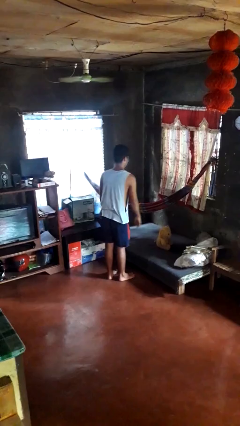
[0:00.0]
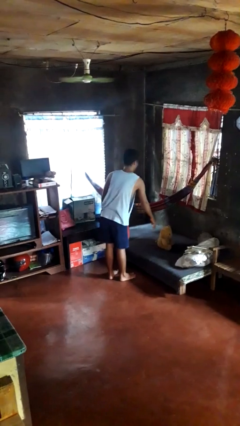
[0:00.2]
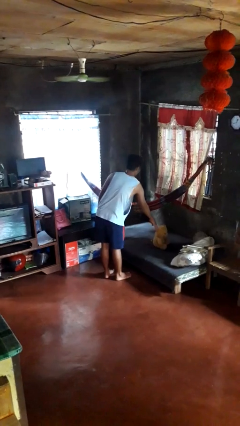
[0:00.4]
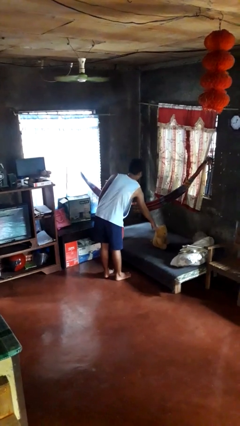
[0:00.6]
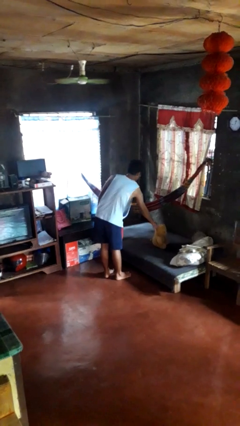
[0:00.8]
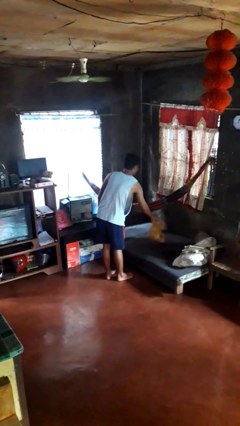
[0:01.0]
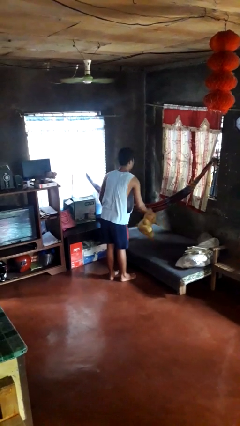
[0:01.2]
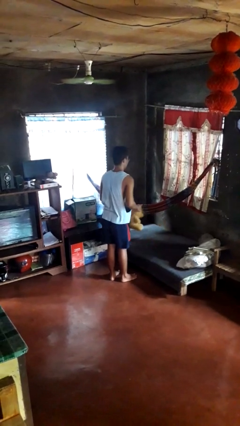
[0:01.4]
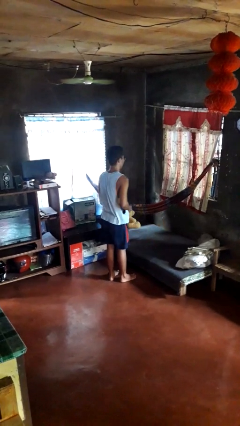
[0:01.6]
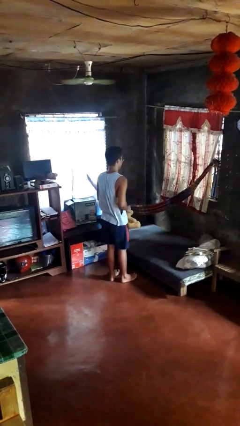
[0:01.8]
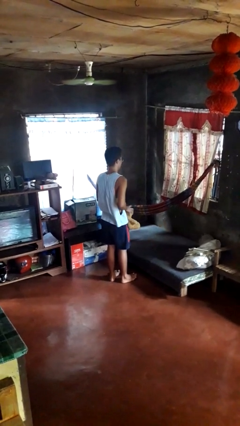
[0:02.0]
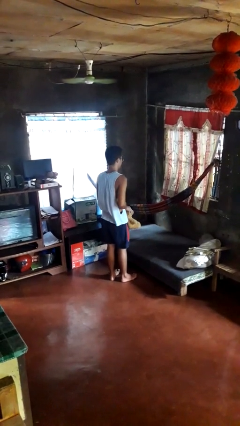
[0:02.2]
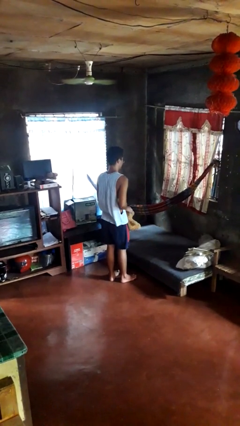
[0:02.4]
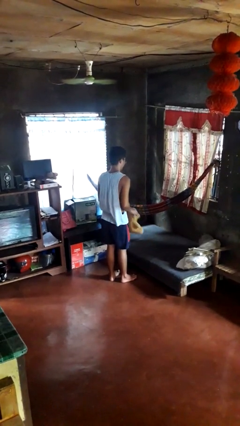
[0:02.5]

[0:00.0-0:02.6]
person picks up object from bed

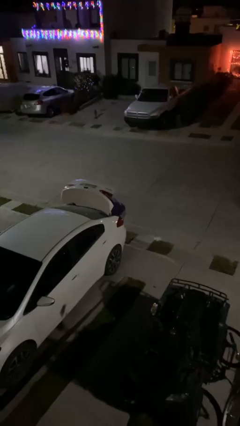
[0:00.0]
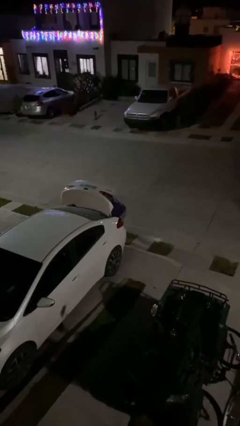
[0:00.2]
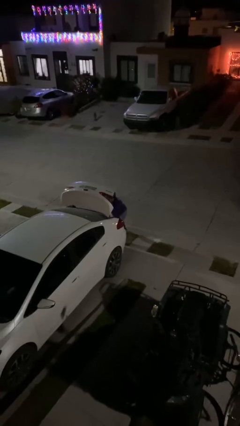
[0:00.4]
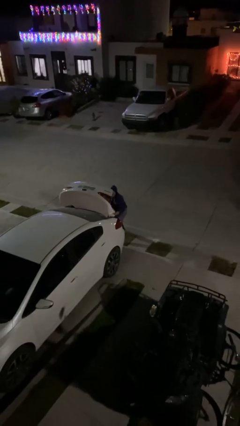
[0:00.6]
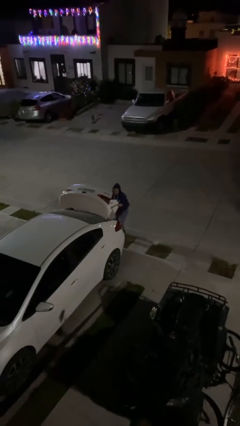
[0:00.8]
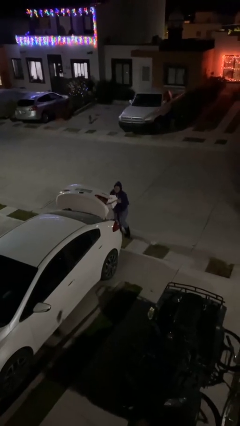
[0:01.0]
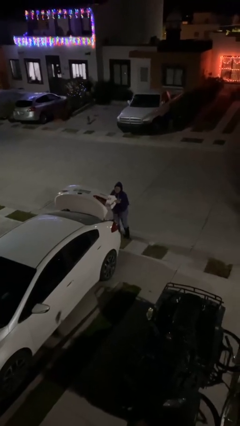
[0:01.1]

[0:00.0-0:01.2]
person unloads car

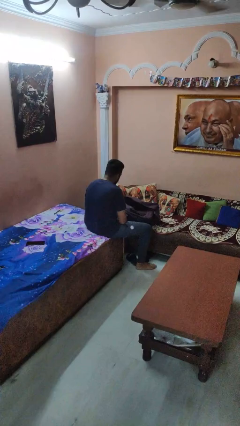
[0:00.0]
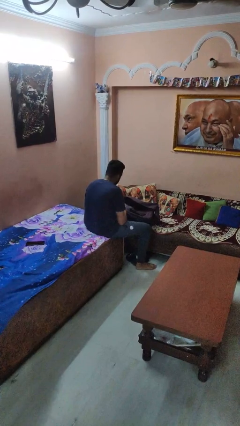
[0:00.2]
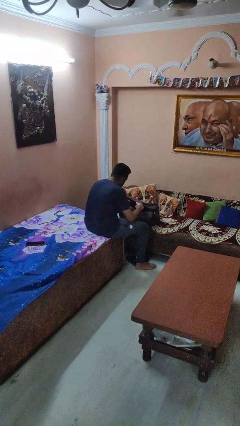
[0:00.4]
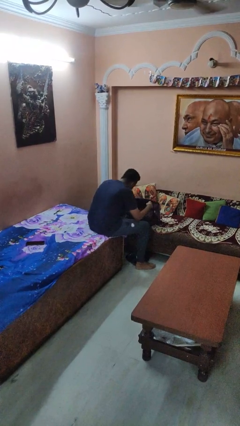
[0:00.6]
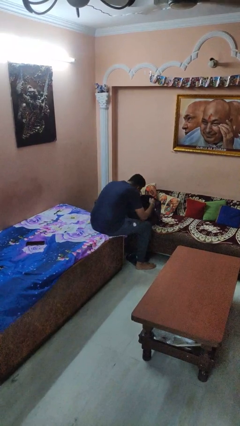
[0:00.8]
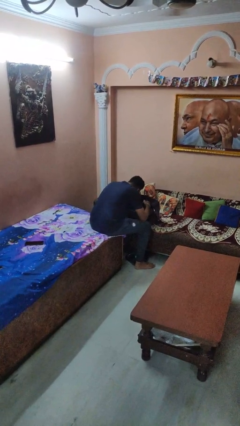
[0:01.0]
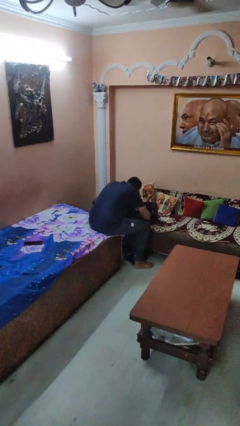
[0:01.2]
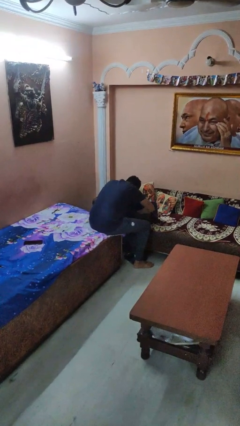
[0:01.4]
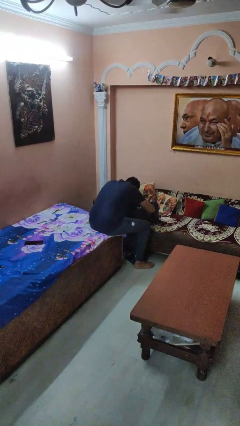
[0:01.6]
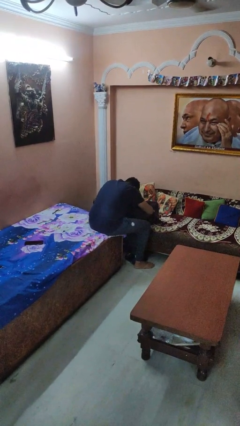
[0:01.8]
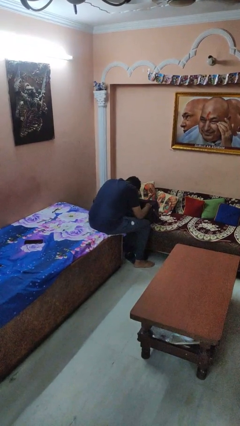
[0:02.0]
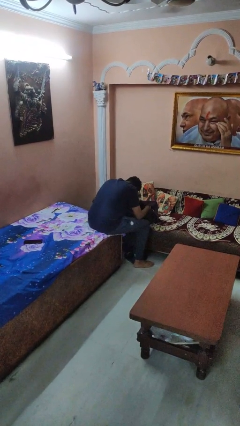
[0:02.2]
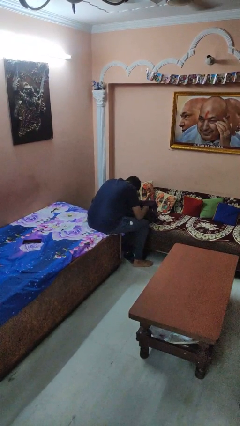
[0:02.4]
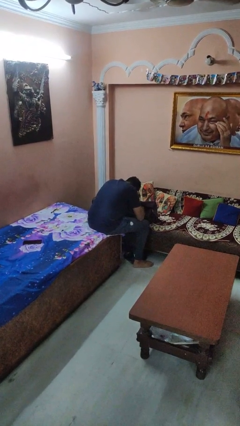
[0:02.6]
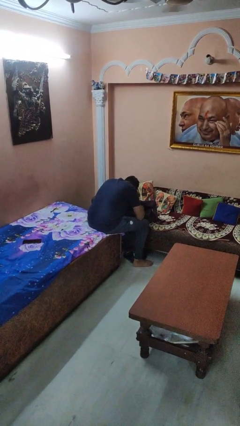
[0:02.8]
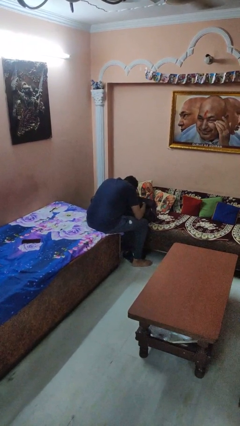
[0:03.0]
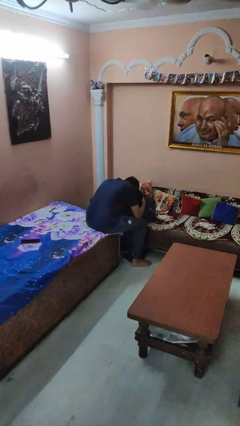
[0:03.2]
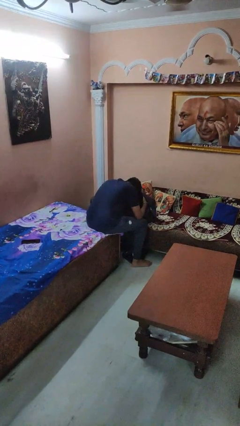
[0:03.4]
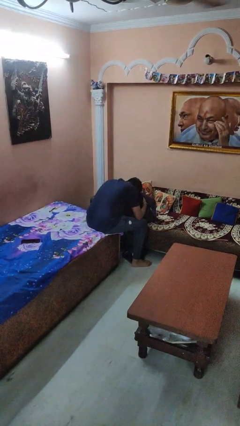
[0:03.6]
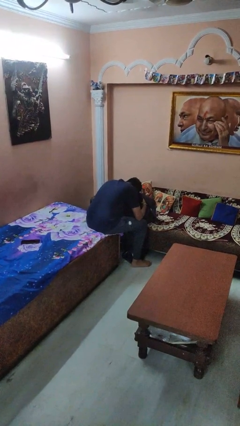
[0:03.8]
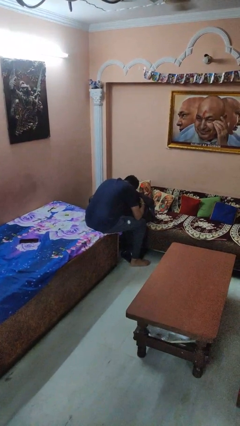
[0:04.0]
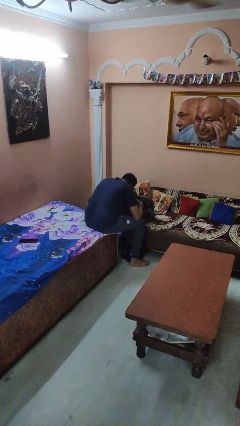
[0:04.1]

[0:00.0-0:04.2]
person searches in bag

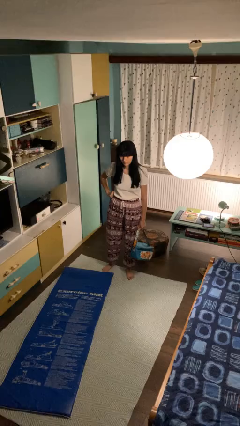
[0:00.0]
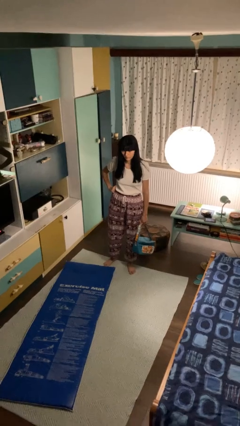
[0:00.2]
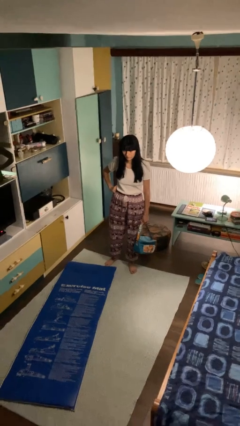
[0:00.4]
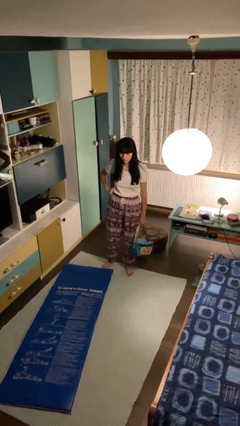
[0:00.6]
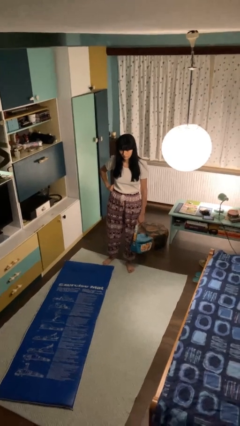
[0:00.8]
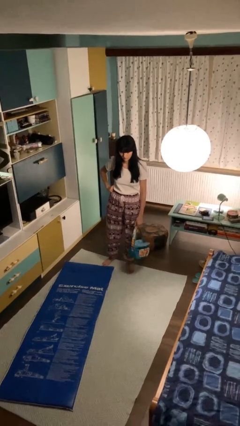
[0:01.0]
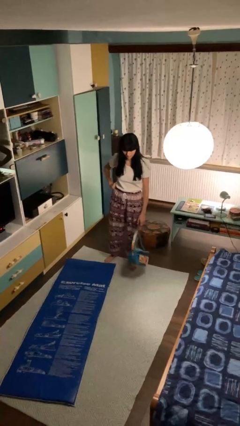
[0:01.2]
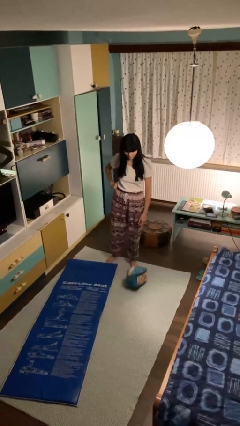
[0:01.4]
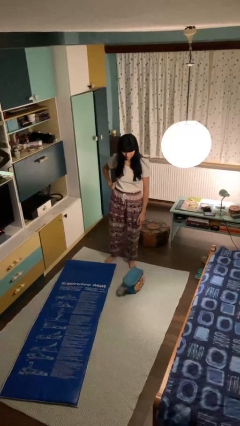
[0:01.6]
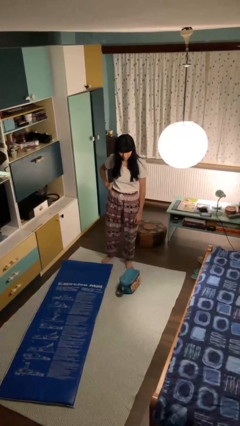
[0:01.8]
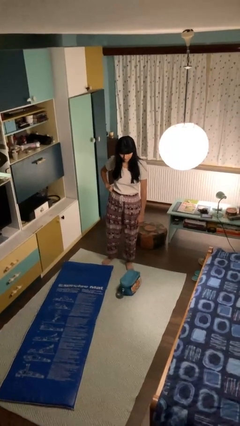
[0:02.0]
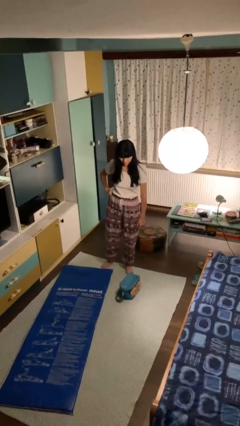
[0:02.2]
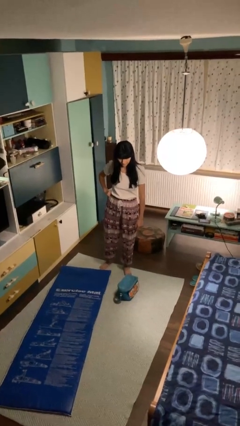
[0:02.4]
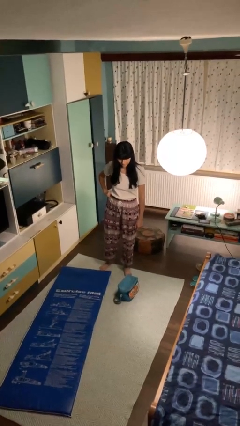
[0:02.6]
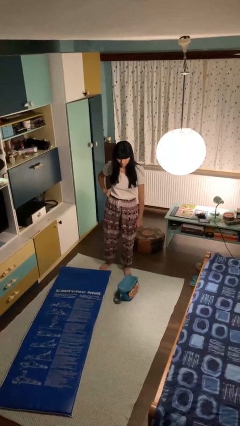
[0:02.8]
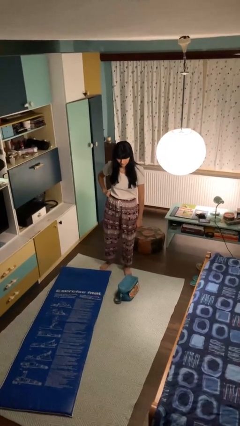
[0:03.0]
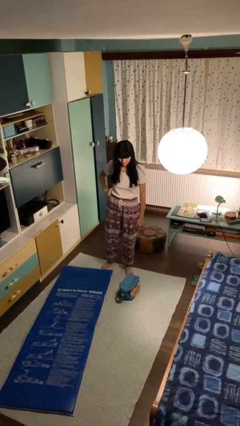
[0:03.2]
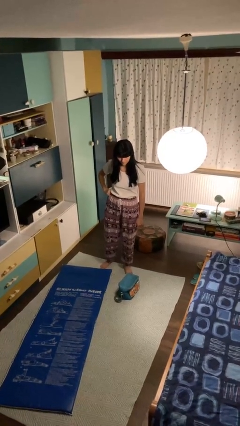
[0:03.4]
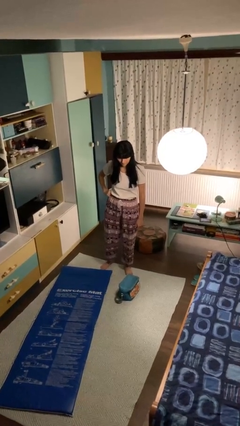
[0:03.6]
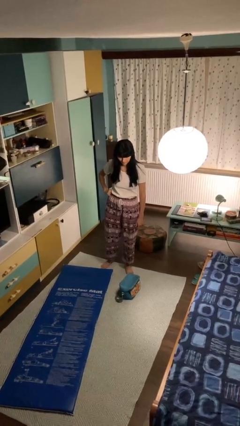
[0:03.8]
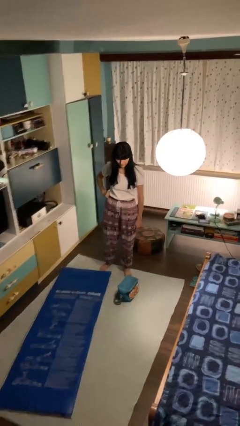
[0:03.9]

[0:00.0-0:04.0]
person drops object

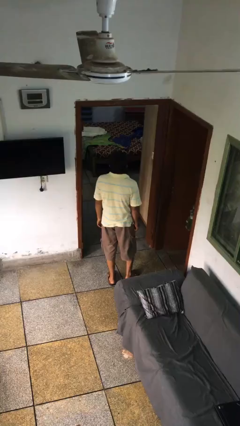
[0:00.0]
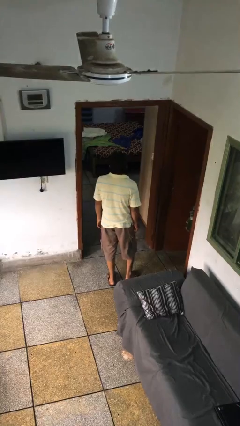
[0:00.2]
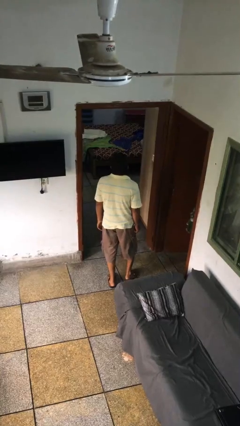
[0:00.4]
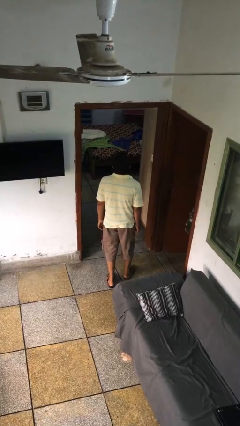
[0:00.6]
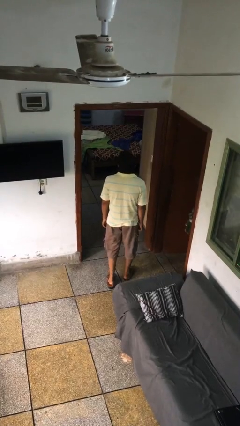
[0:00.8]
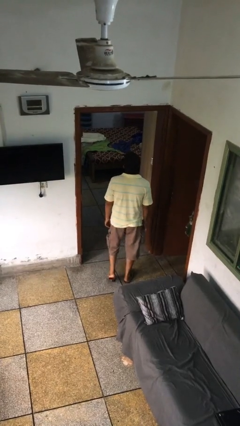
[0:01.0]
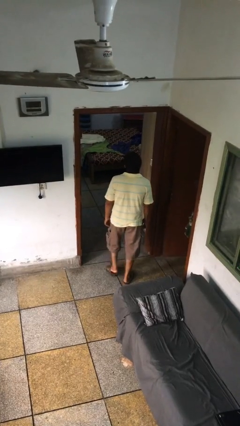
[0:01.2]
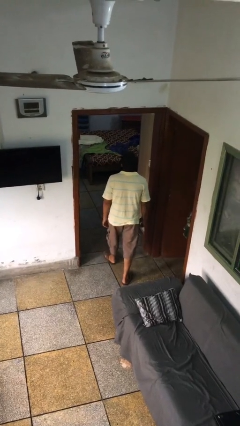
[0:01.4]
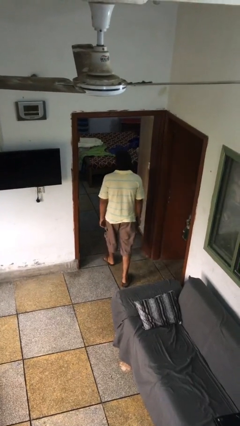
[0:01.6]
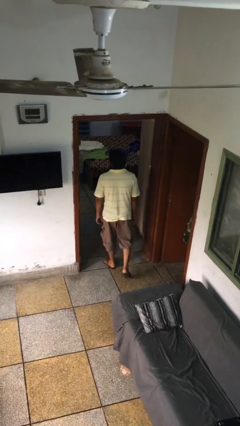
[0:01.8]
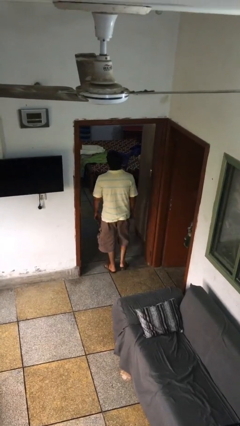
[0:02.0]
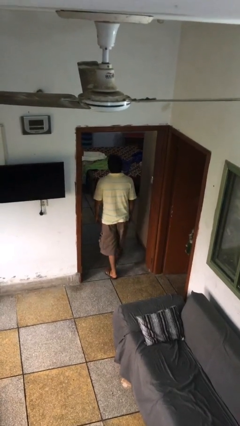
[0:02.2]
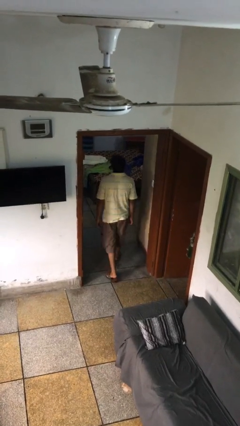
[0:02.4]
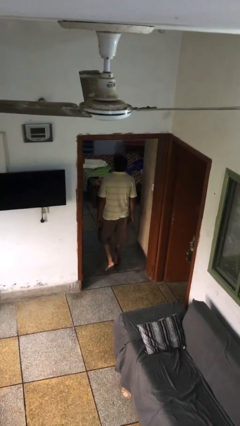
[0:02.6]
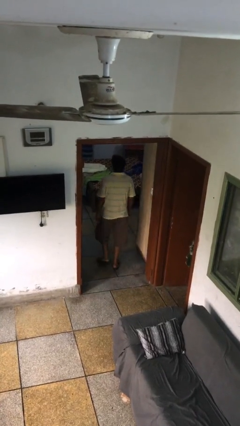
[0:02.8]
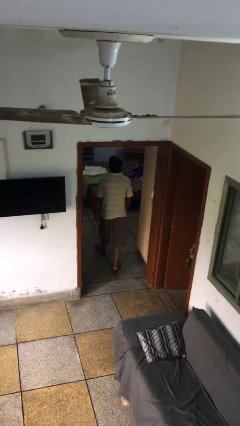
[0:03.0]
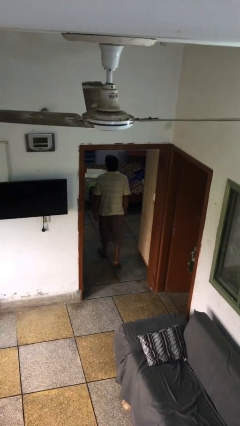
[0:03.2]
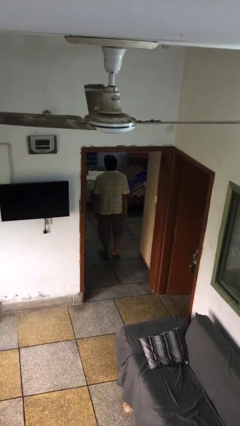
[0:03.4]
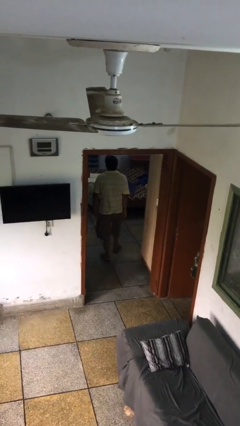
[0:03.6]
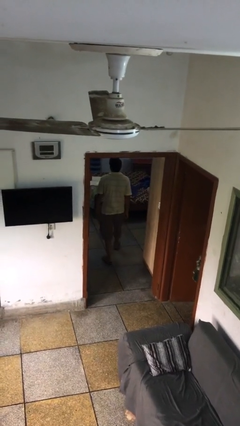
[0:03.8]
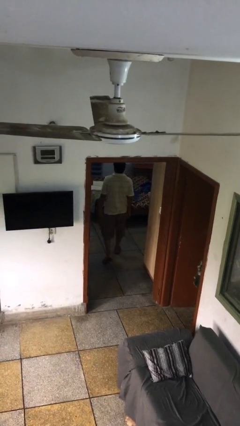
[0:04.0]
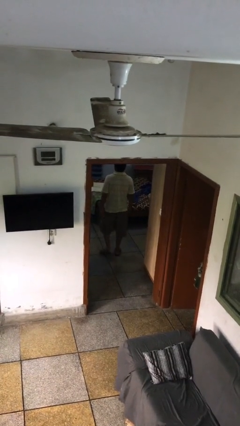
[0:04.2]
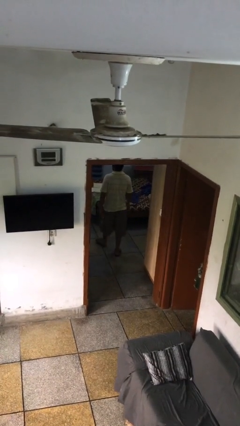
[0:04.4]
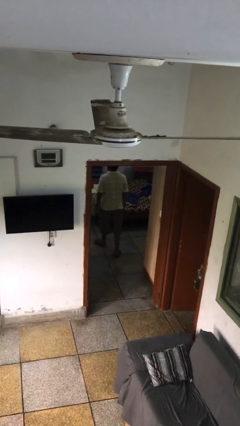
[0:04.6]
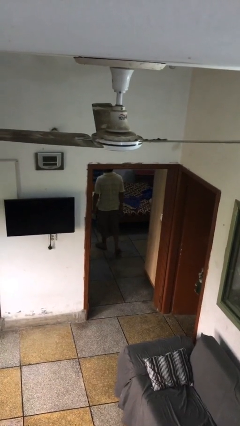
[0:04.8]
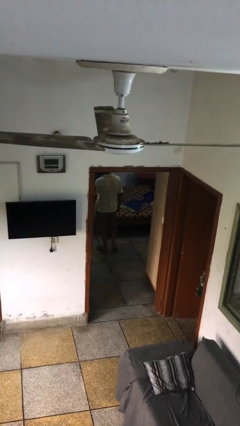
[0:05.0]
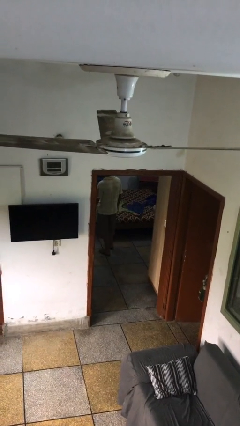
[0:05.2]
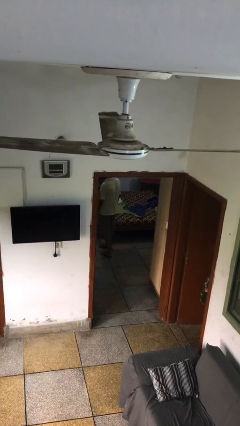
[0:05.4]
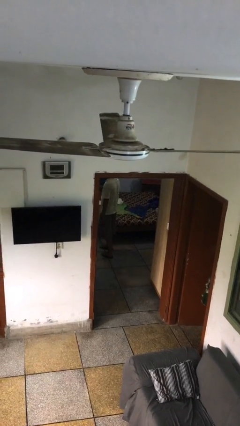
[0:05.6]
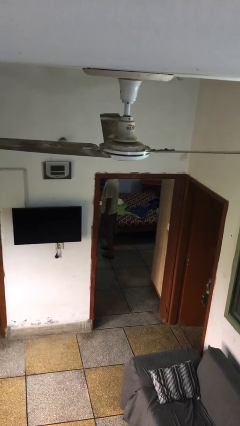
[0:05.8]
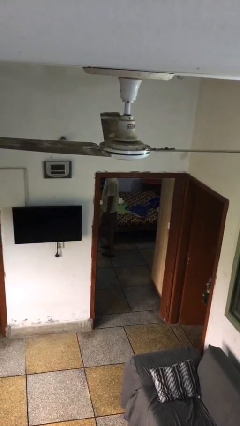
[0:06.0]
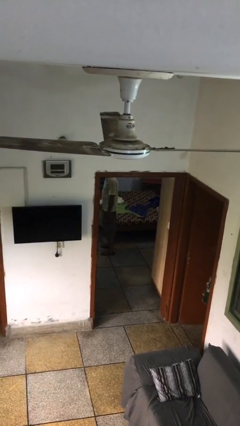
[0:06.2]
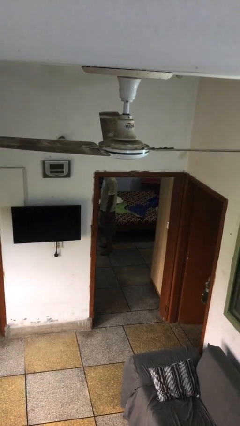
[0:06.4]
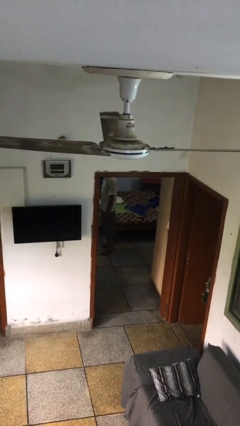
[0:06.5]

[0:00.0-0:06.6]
person exits scene through structure
